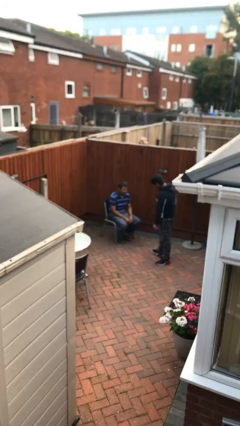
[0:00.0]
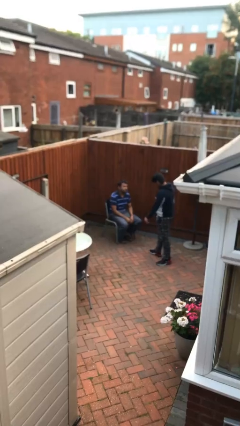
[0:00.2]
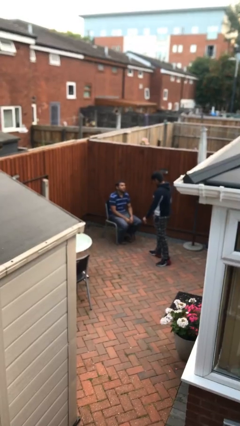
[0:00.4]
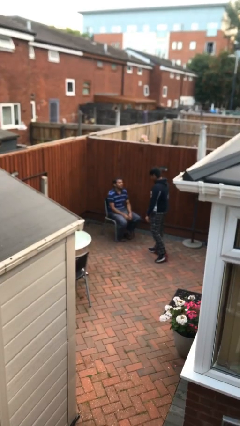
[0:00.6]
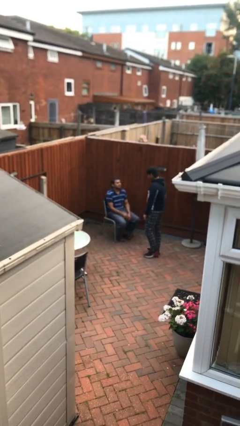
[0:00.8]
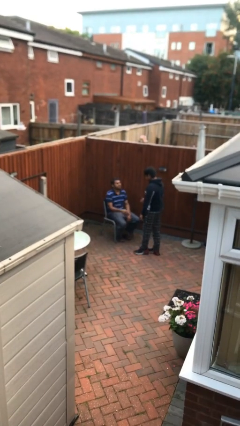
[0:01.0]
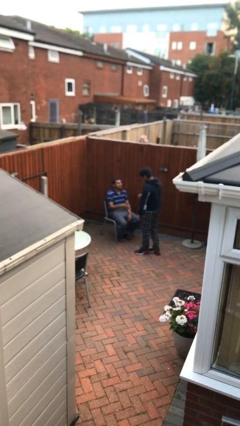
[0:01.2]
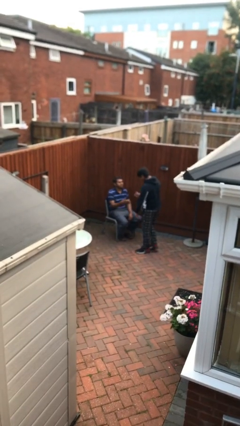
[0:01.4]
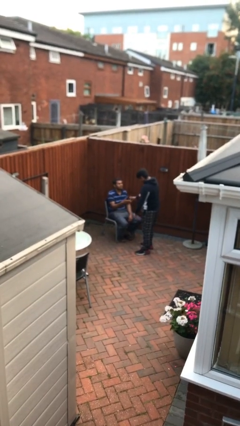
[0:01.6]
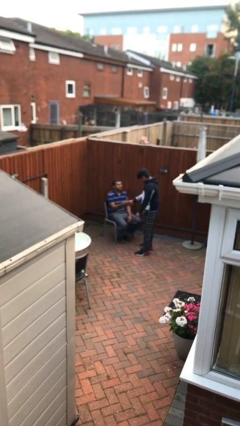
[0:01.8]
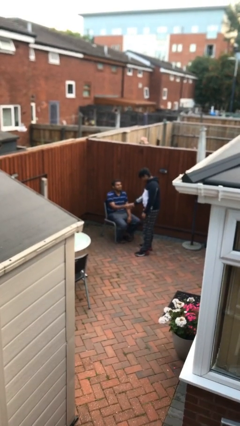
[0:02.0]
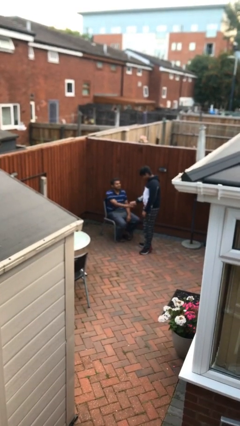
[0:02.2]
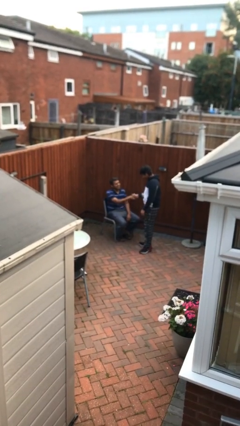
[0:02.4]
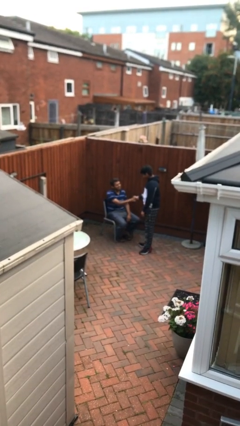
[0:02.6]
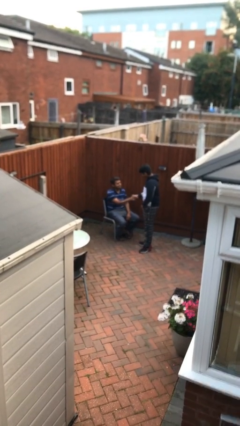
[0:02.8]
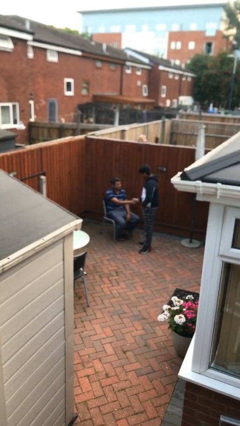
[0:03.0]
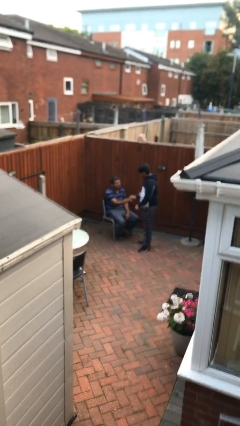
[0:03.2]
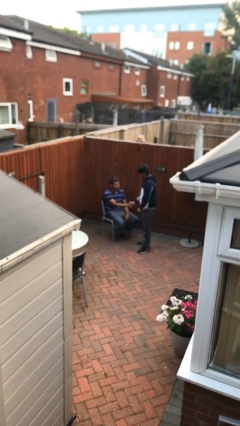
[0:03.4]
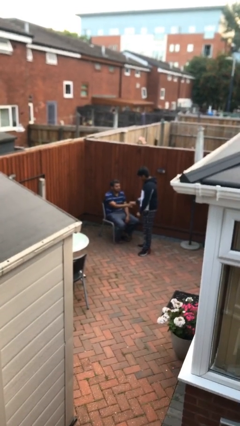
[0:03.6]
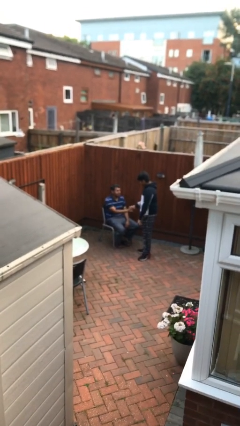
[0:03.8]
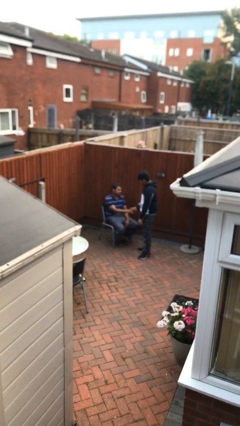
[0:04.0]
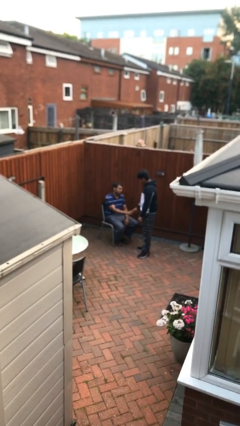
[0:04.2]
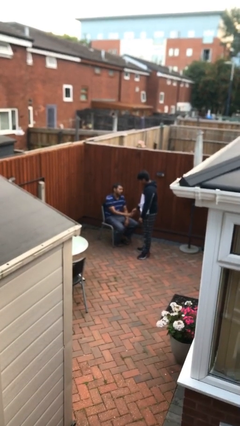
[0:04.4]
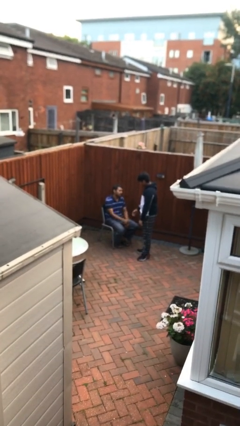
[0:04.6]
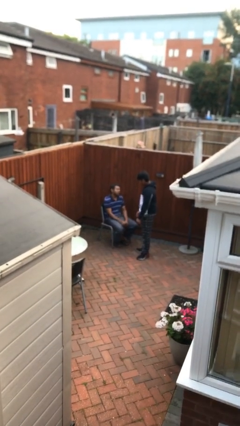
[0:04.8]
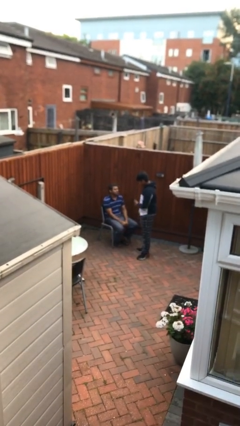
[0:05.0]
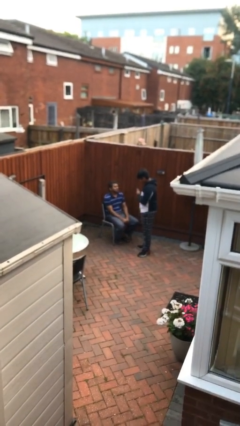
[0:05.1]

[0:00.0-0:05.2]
person shakes hand

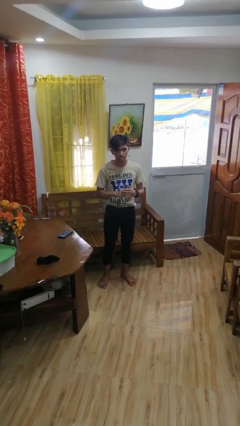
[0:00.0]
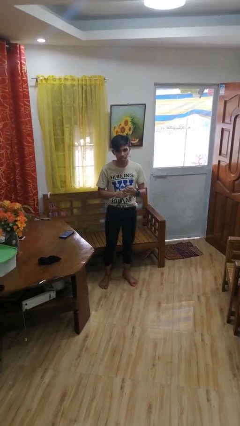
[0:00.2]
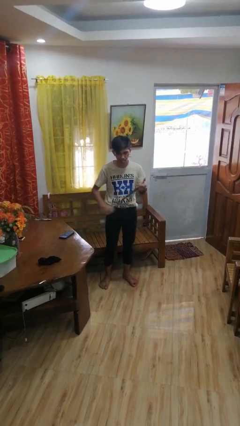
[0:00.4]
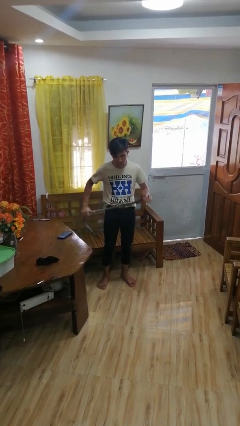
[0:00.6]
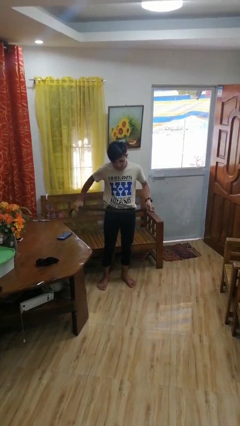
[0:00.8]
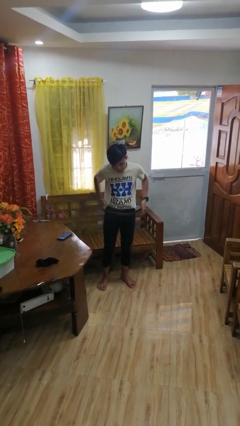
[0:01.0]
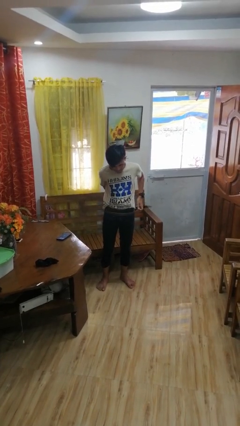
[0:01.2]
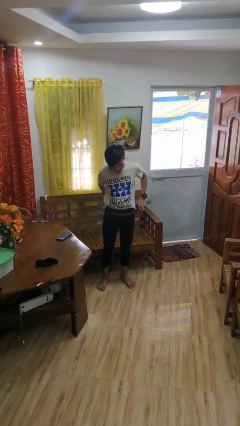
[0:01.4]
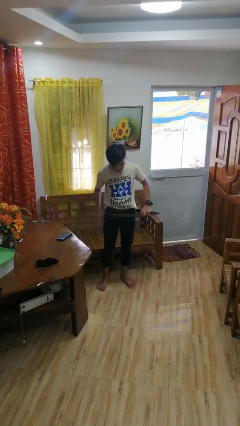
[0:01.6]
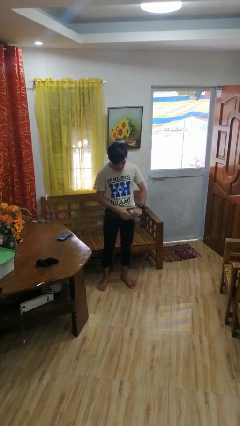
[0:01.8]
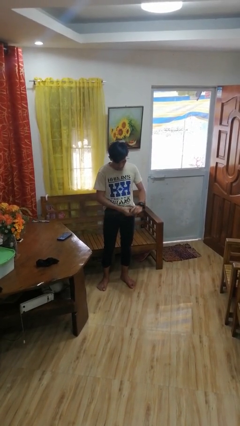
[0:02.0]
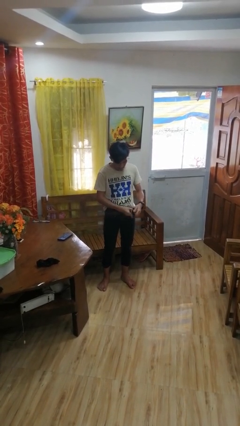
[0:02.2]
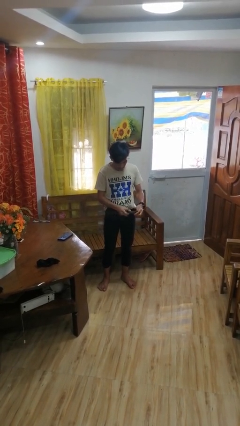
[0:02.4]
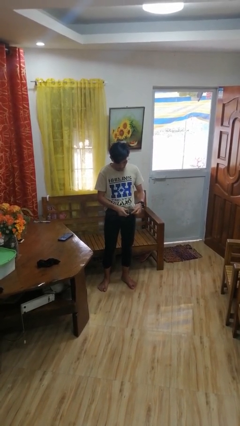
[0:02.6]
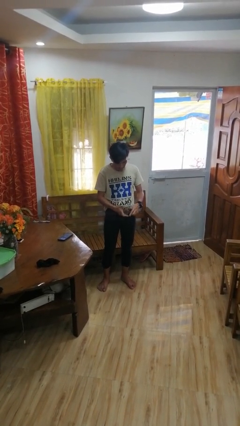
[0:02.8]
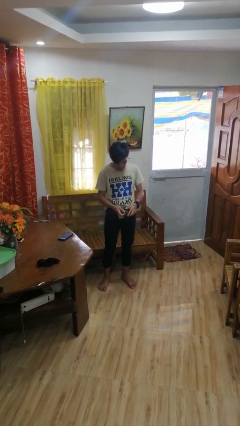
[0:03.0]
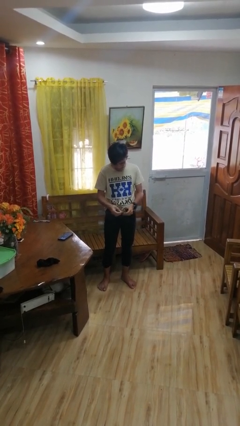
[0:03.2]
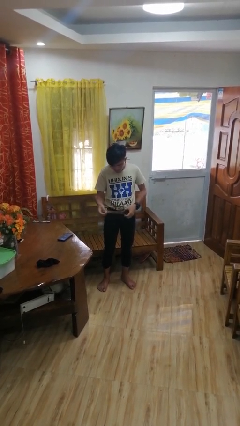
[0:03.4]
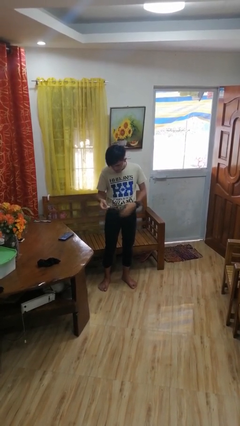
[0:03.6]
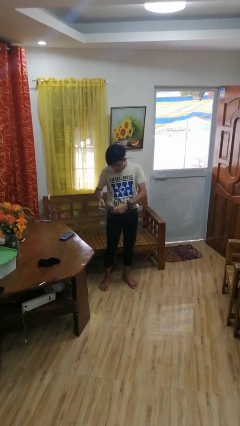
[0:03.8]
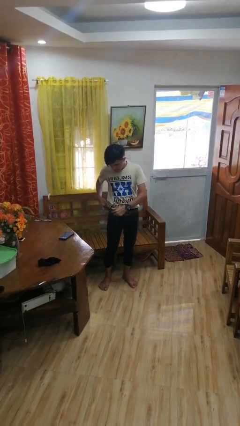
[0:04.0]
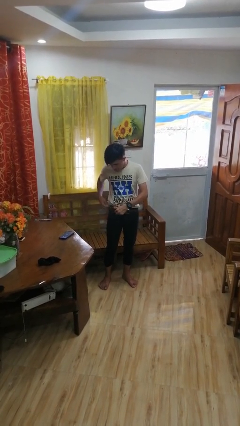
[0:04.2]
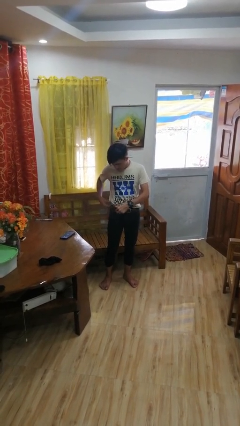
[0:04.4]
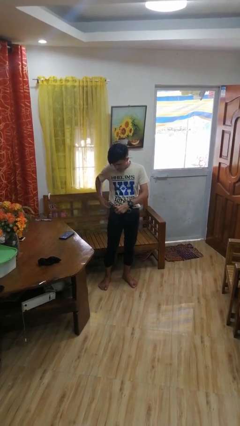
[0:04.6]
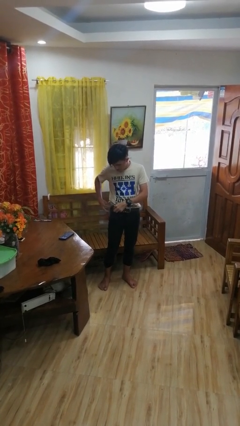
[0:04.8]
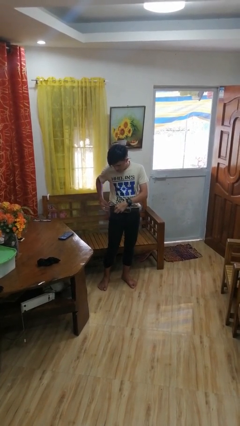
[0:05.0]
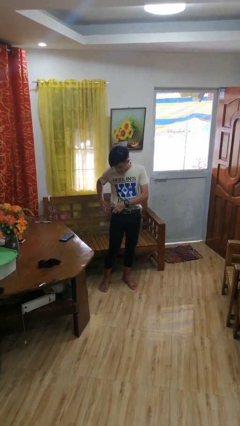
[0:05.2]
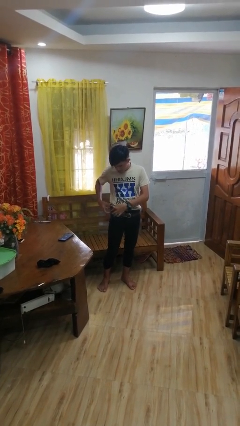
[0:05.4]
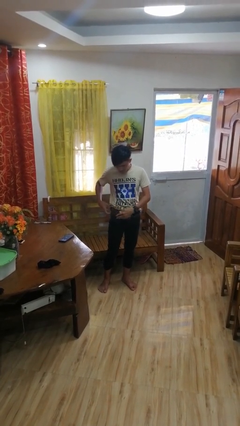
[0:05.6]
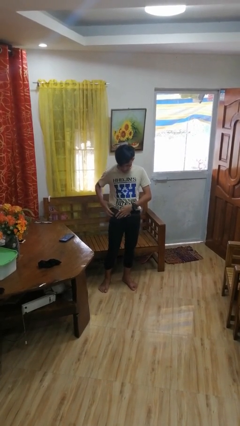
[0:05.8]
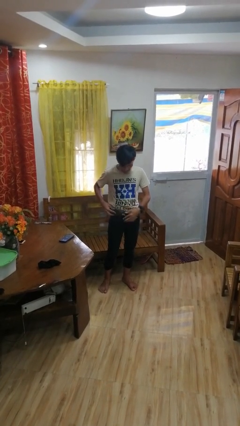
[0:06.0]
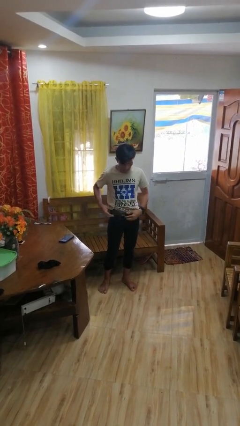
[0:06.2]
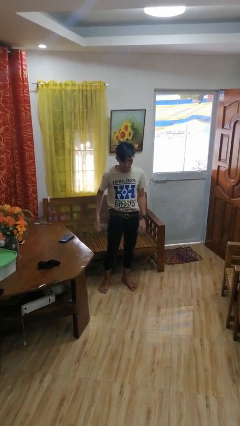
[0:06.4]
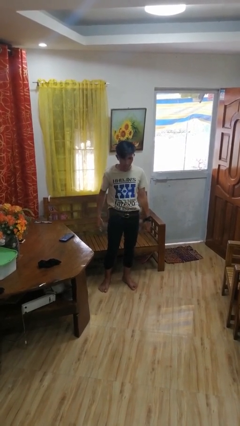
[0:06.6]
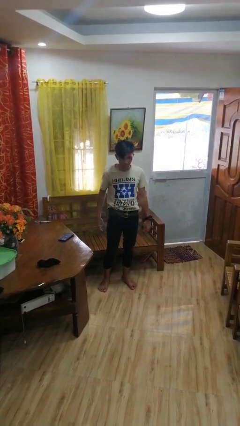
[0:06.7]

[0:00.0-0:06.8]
person puts on belt

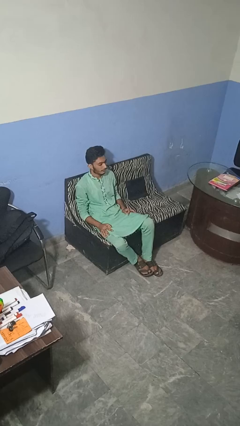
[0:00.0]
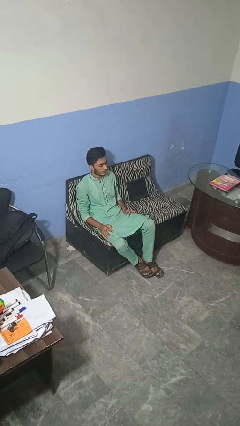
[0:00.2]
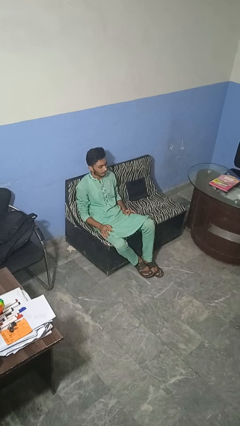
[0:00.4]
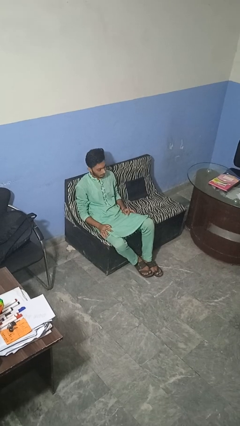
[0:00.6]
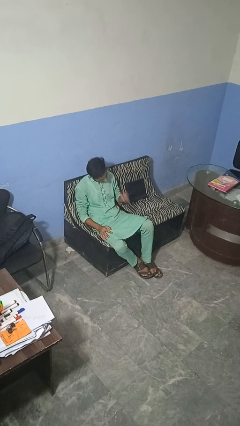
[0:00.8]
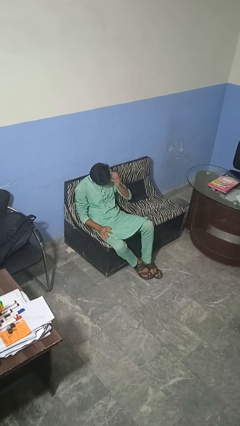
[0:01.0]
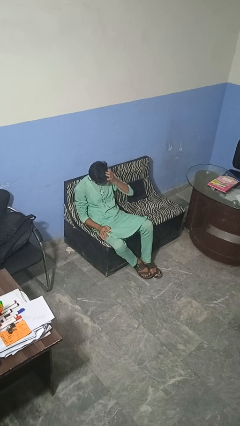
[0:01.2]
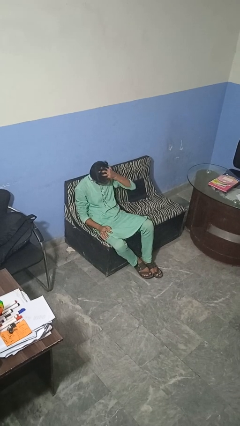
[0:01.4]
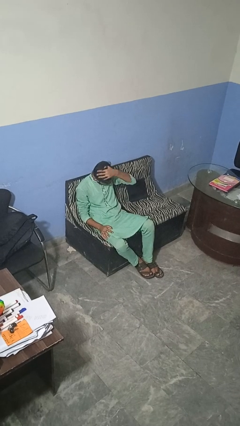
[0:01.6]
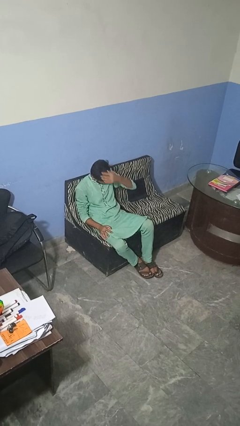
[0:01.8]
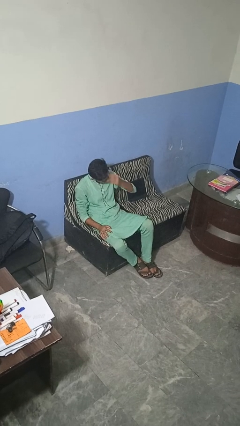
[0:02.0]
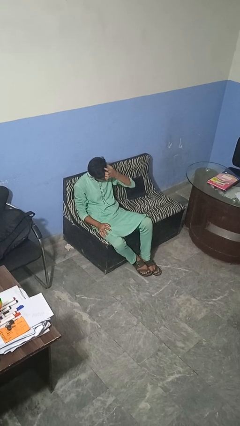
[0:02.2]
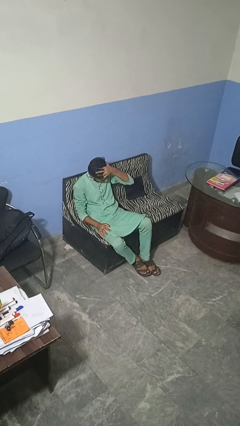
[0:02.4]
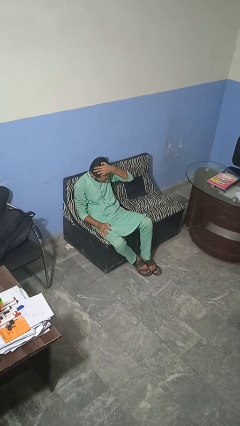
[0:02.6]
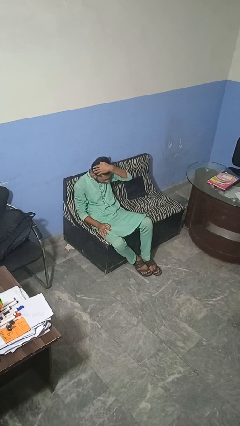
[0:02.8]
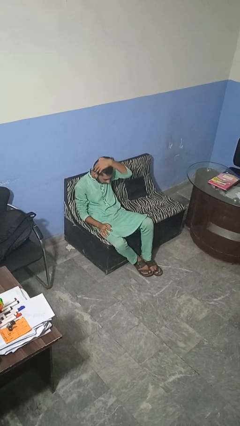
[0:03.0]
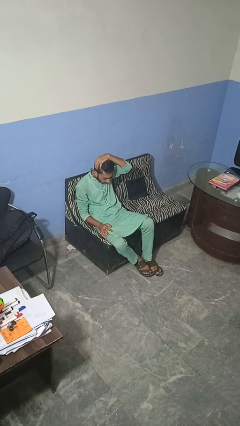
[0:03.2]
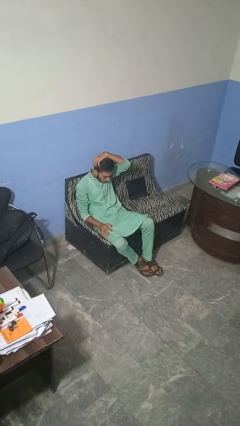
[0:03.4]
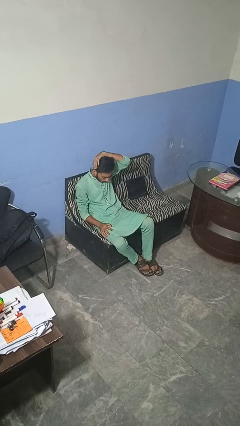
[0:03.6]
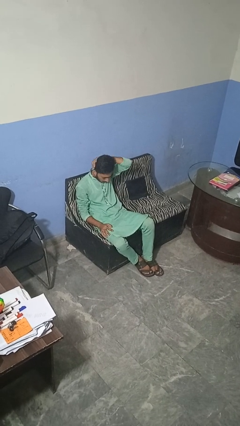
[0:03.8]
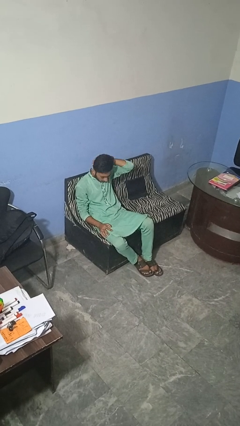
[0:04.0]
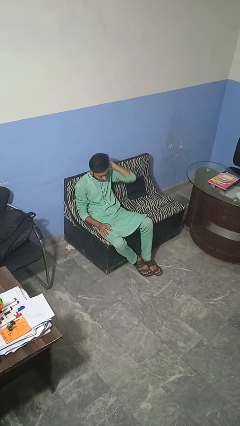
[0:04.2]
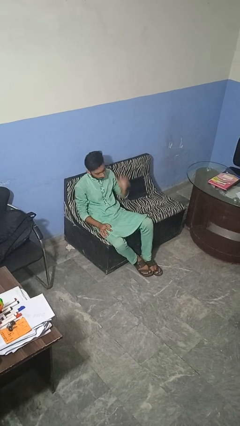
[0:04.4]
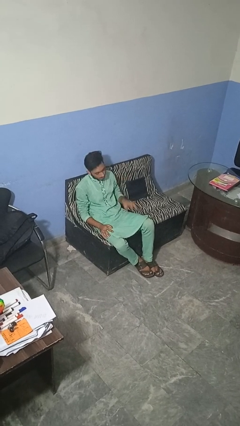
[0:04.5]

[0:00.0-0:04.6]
person strokes hair

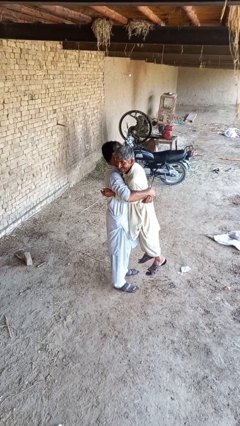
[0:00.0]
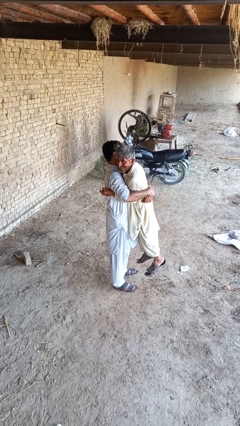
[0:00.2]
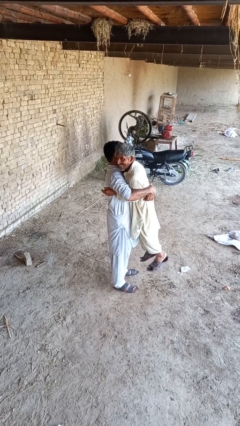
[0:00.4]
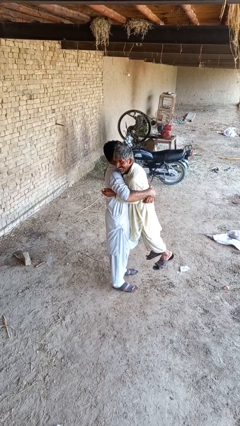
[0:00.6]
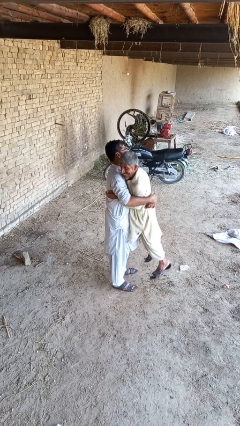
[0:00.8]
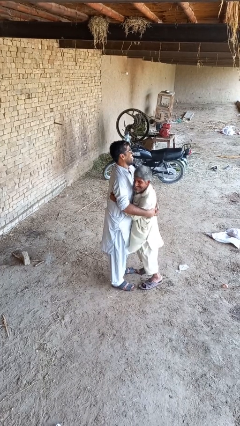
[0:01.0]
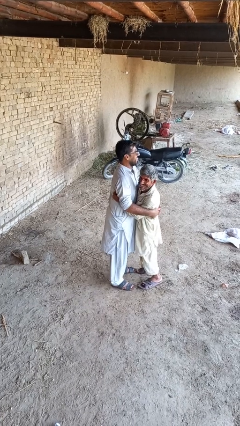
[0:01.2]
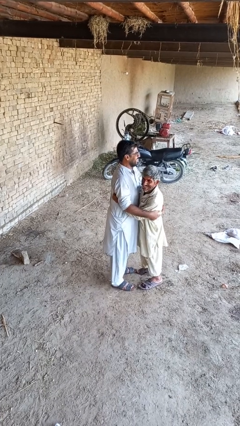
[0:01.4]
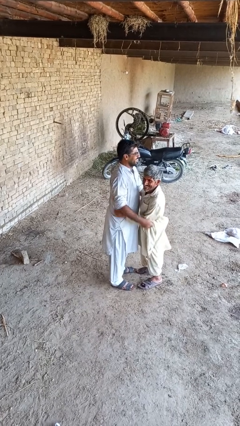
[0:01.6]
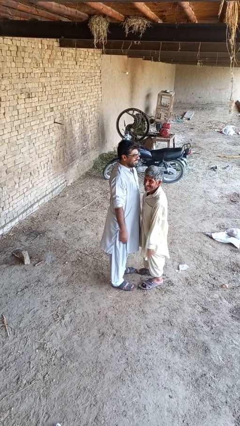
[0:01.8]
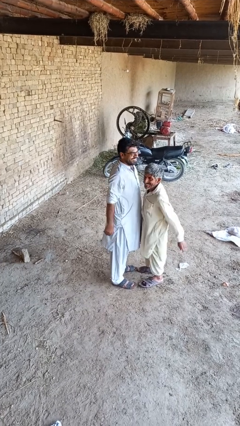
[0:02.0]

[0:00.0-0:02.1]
person puts down person
